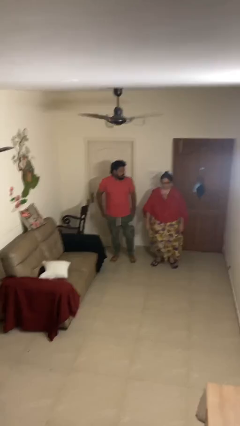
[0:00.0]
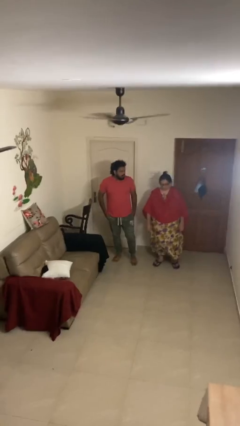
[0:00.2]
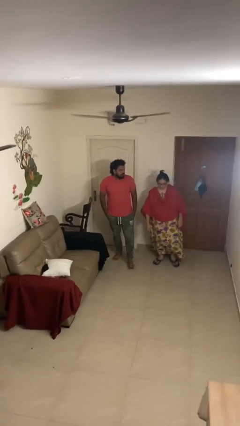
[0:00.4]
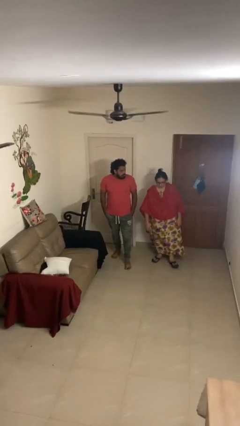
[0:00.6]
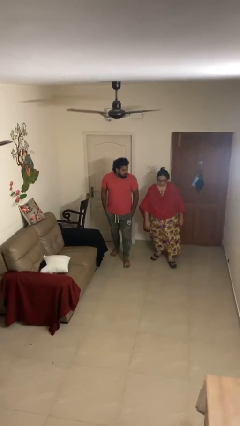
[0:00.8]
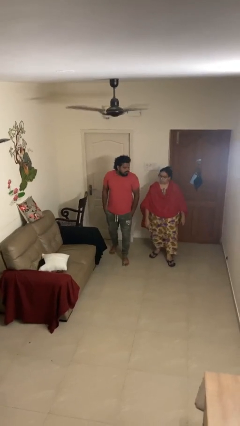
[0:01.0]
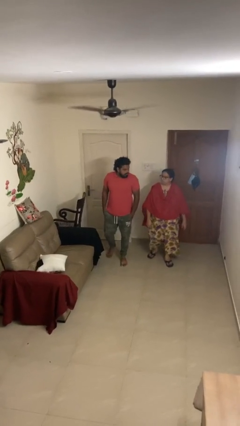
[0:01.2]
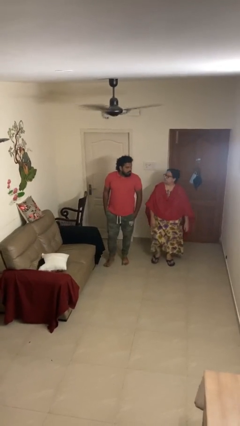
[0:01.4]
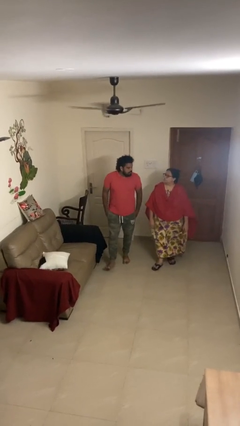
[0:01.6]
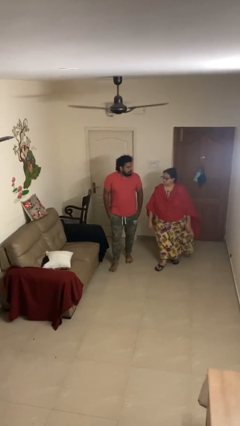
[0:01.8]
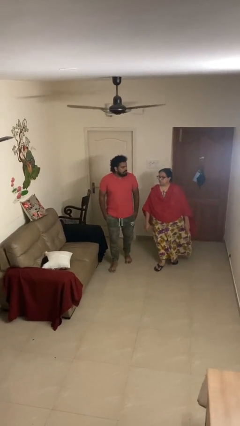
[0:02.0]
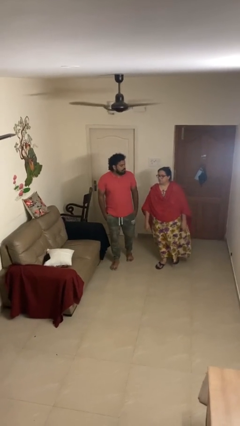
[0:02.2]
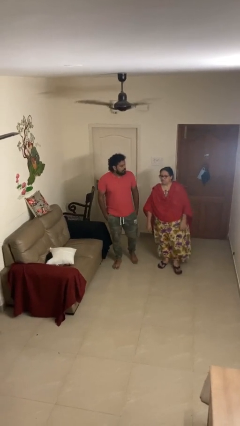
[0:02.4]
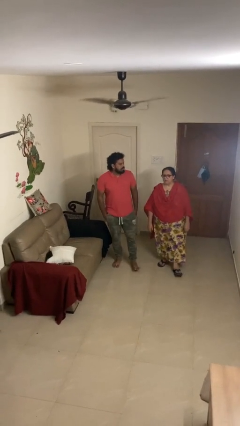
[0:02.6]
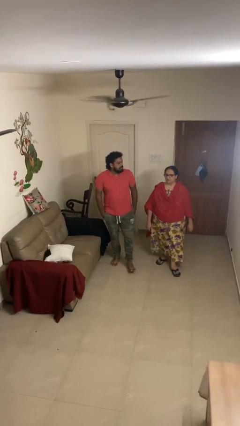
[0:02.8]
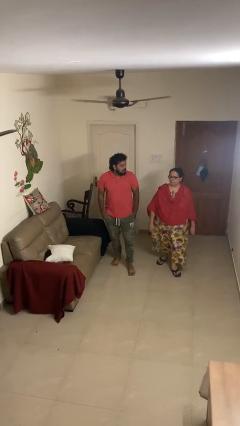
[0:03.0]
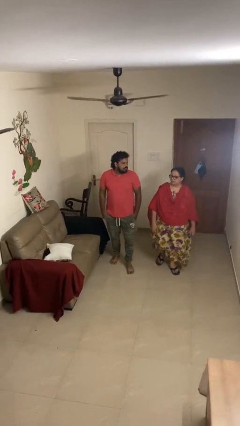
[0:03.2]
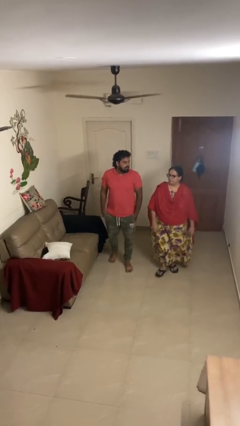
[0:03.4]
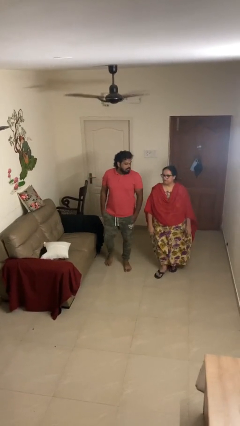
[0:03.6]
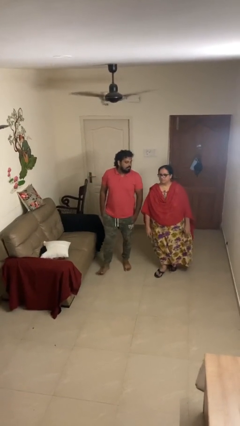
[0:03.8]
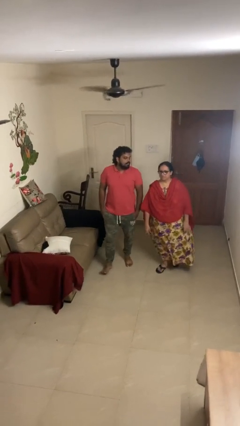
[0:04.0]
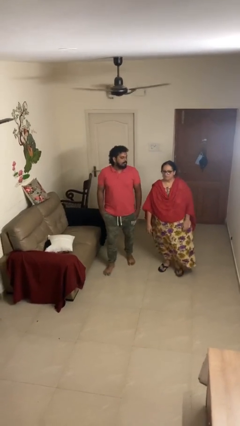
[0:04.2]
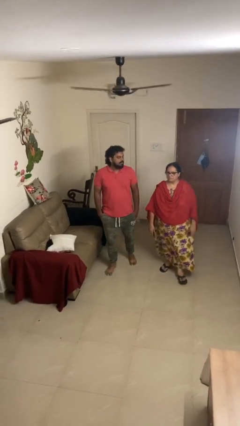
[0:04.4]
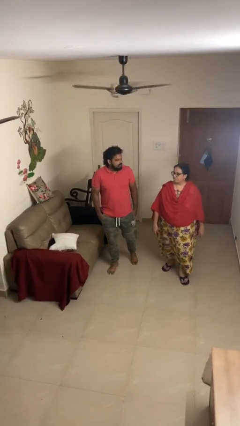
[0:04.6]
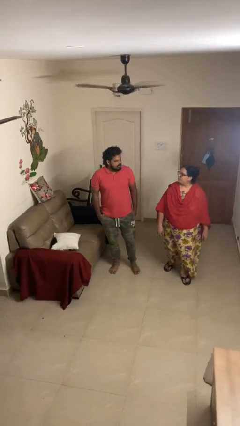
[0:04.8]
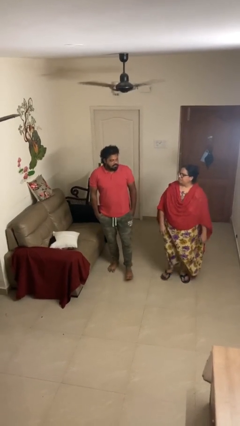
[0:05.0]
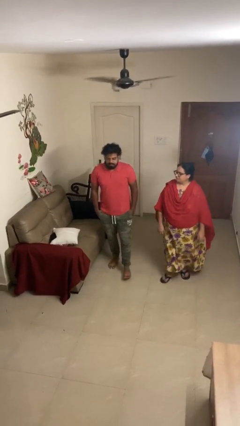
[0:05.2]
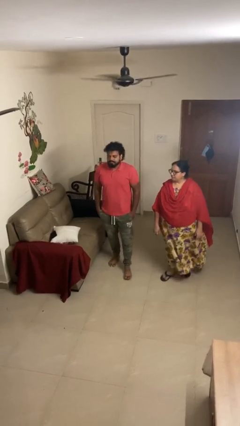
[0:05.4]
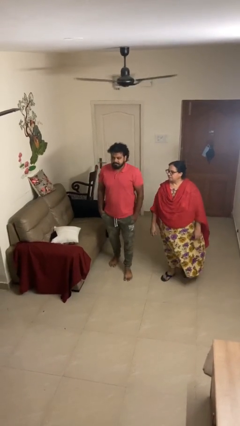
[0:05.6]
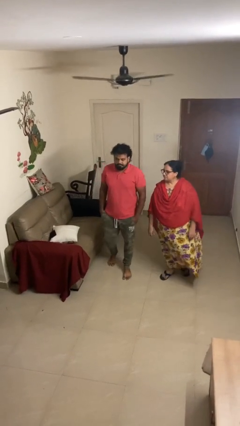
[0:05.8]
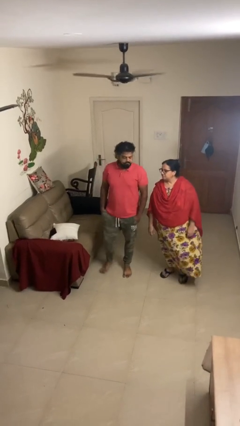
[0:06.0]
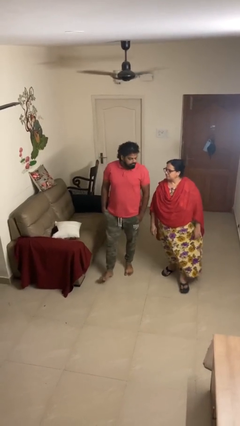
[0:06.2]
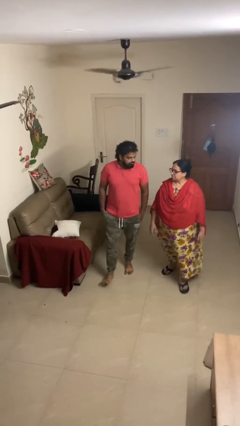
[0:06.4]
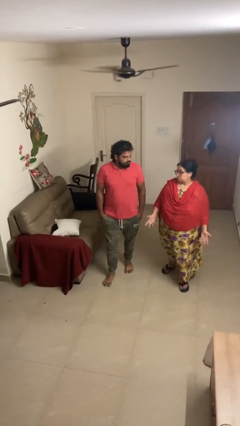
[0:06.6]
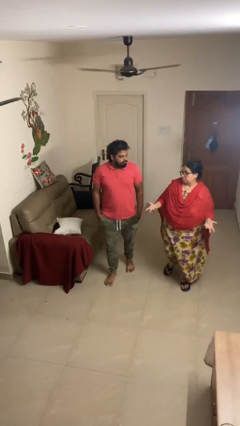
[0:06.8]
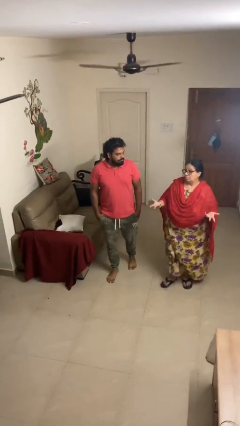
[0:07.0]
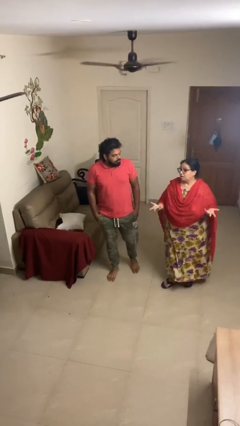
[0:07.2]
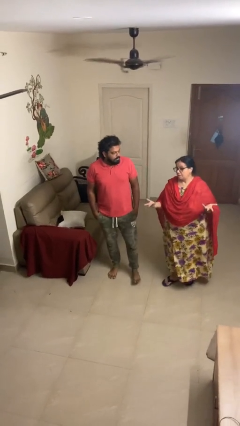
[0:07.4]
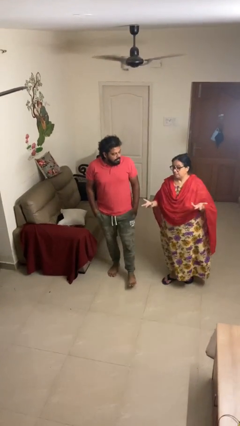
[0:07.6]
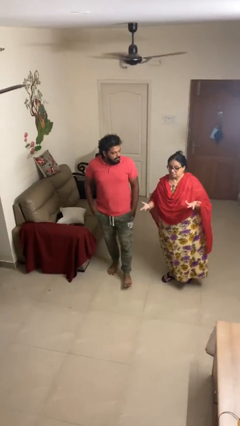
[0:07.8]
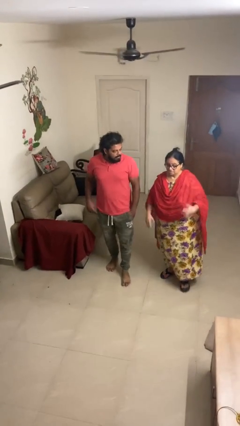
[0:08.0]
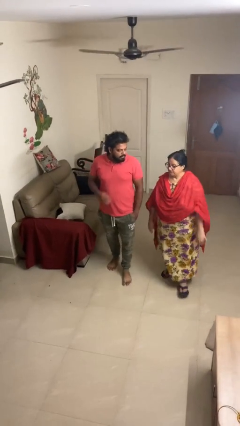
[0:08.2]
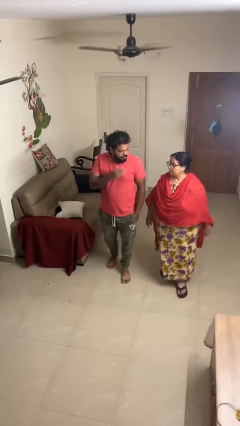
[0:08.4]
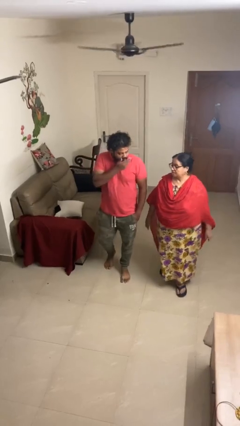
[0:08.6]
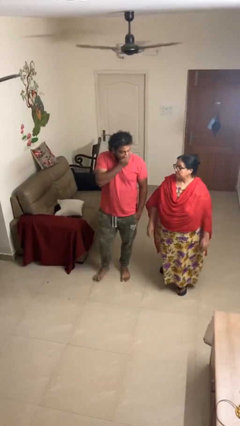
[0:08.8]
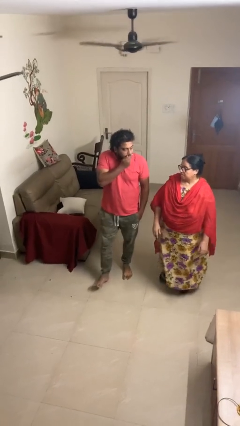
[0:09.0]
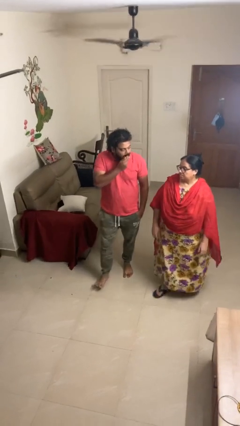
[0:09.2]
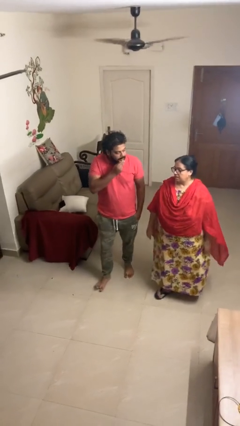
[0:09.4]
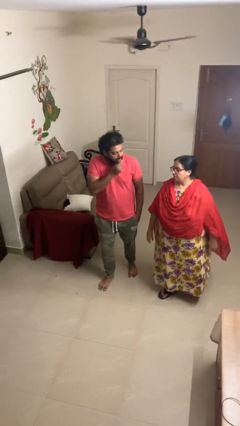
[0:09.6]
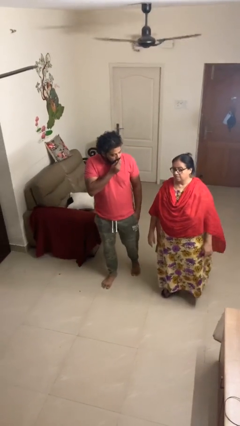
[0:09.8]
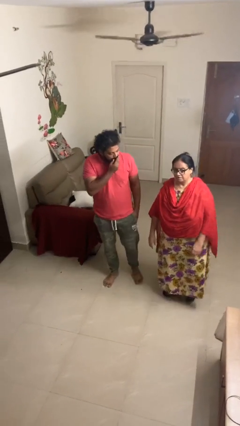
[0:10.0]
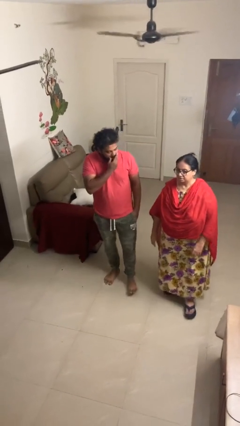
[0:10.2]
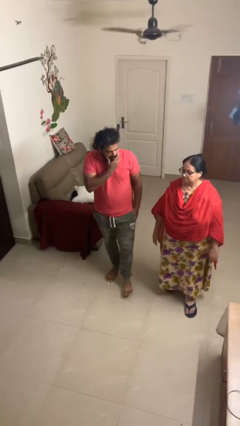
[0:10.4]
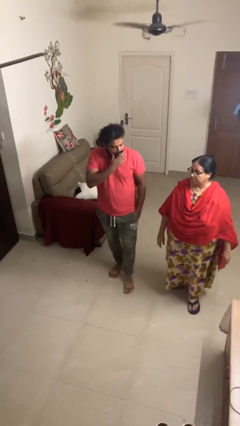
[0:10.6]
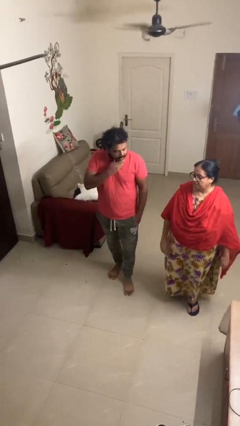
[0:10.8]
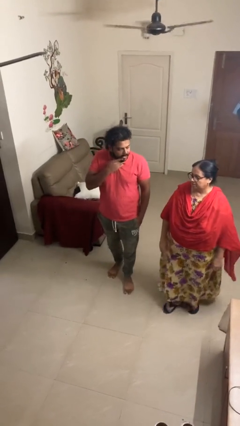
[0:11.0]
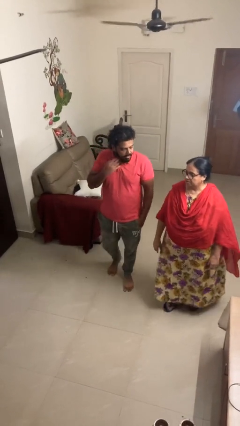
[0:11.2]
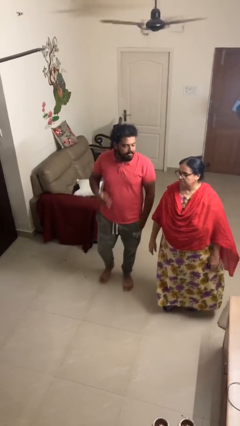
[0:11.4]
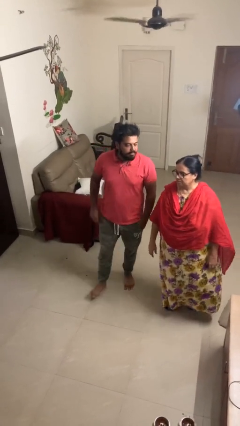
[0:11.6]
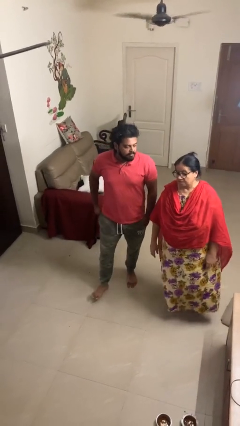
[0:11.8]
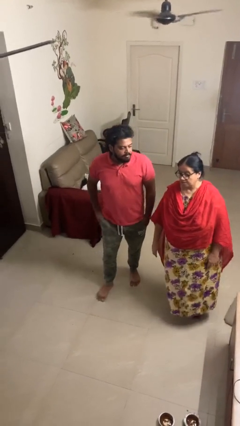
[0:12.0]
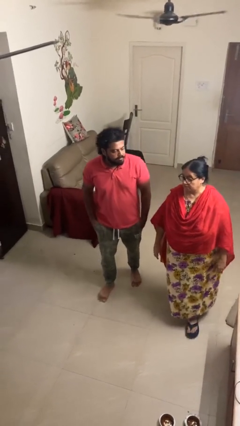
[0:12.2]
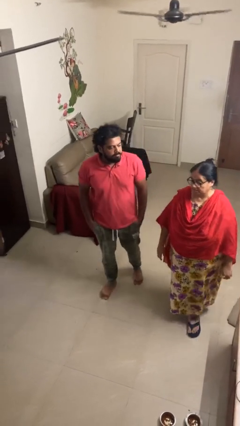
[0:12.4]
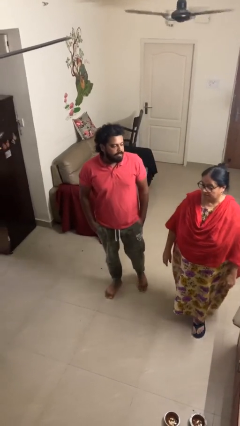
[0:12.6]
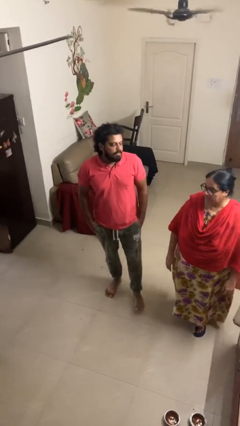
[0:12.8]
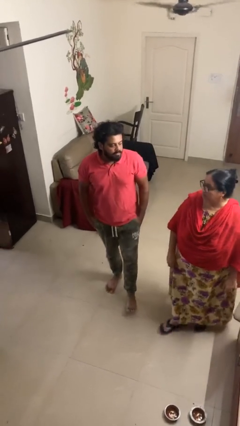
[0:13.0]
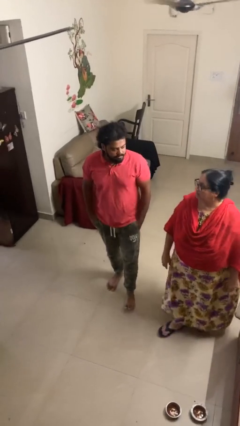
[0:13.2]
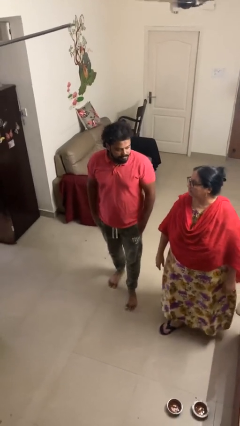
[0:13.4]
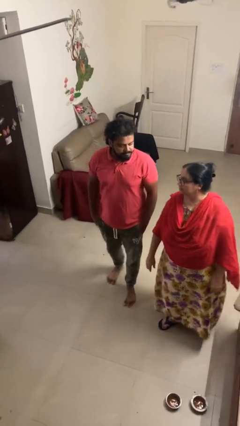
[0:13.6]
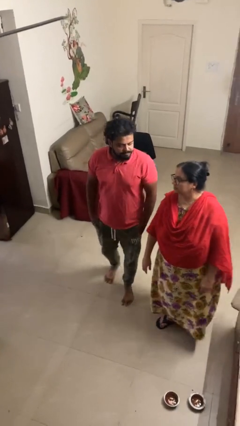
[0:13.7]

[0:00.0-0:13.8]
person talks to person

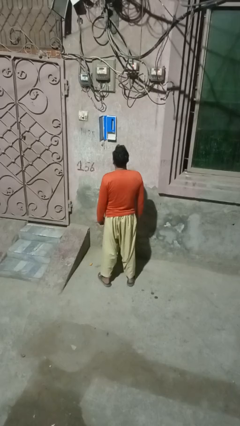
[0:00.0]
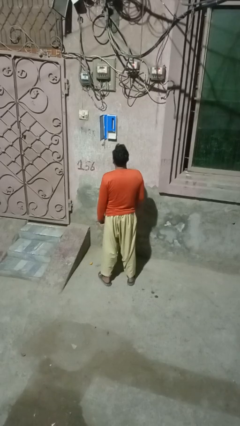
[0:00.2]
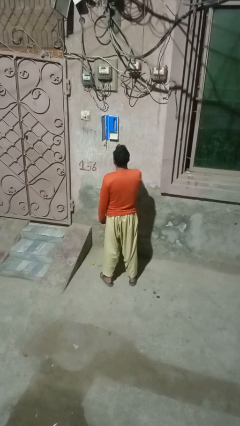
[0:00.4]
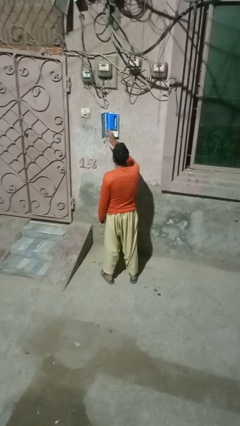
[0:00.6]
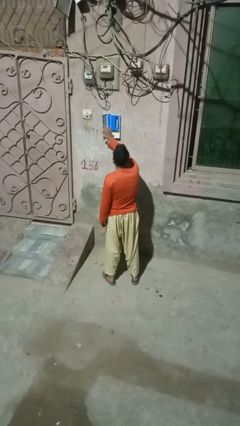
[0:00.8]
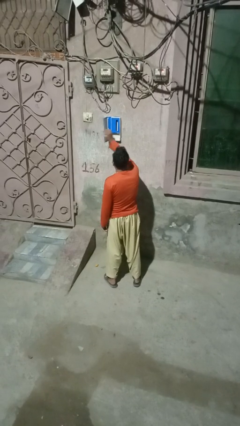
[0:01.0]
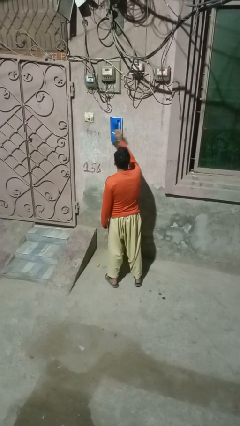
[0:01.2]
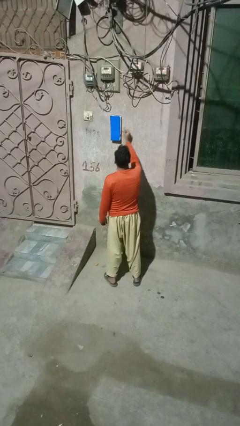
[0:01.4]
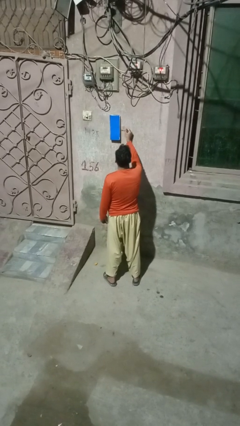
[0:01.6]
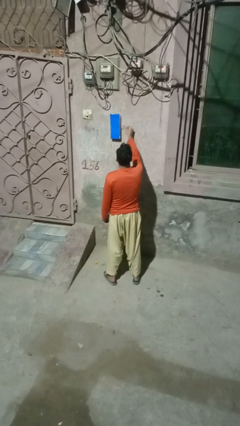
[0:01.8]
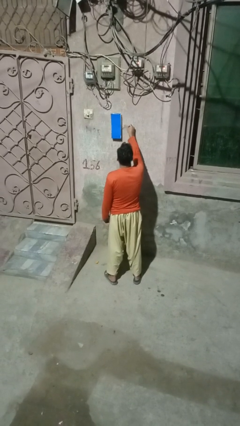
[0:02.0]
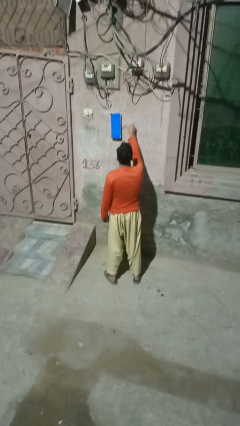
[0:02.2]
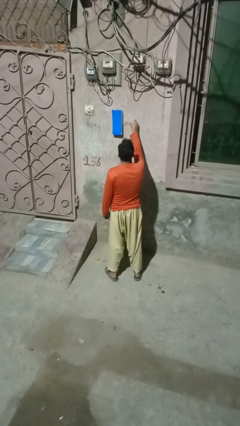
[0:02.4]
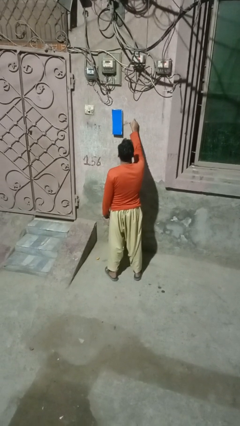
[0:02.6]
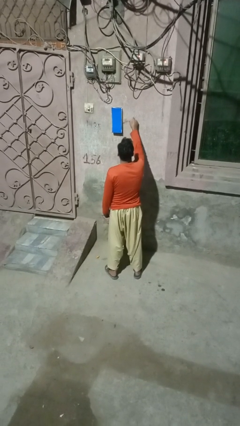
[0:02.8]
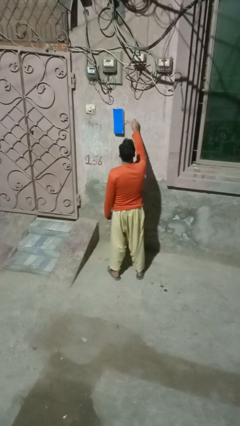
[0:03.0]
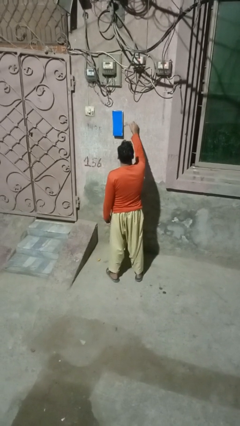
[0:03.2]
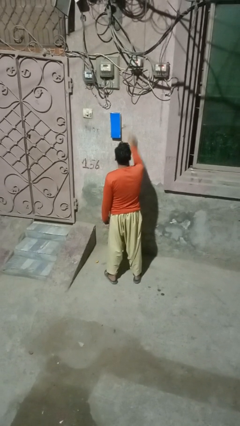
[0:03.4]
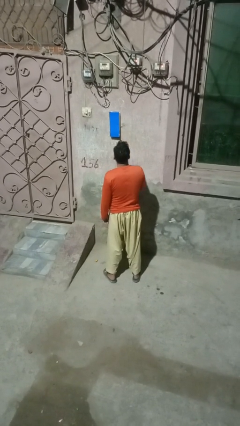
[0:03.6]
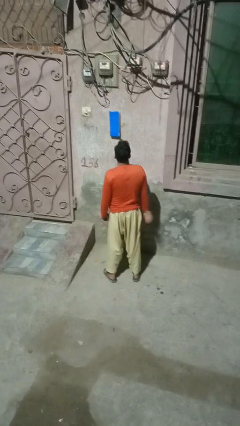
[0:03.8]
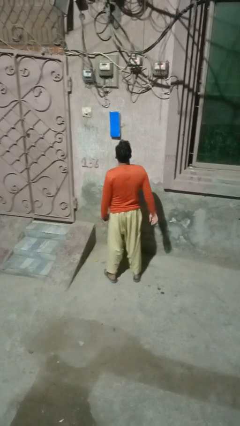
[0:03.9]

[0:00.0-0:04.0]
person closes mailbox

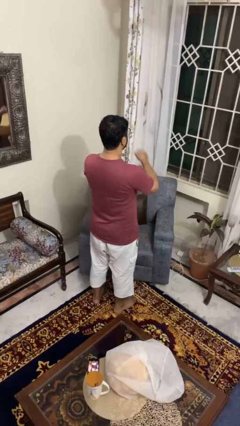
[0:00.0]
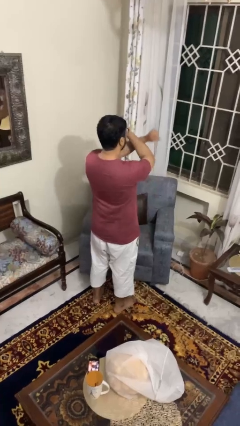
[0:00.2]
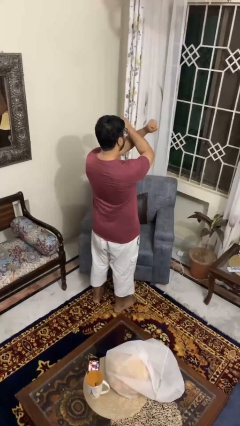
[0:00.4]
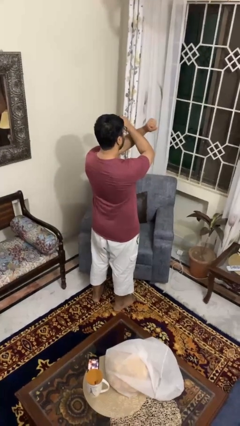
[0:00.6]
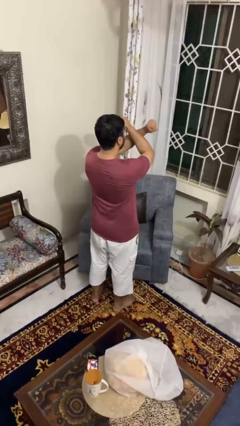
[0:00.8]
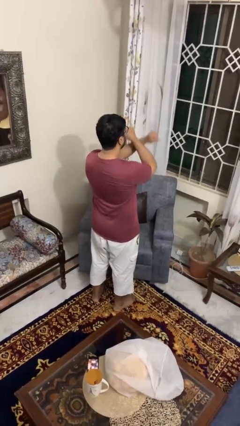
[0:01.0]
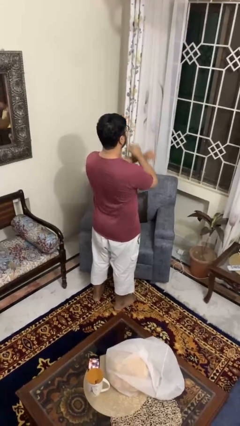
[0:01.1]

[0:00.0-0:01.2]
person gestures arms x
